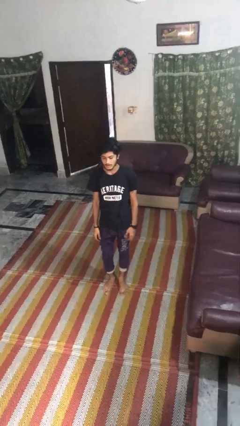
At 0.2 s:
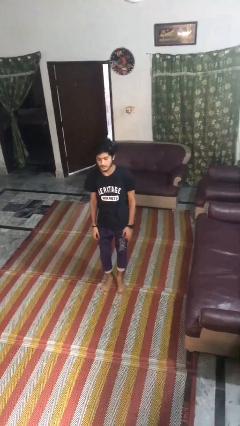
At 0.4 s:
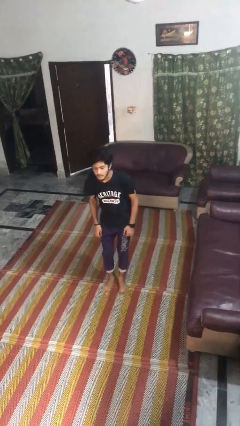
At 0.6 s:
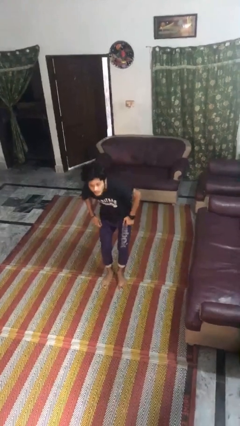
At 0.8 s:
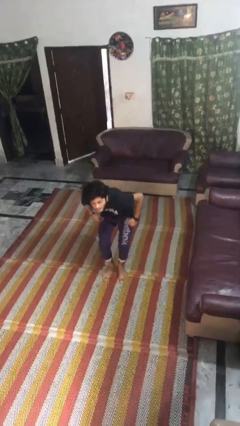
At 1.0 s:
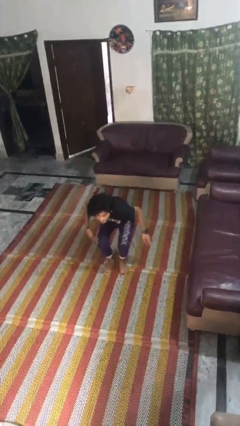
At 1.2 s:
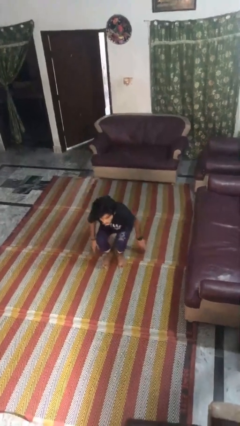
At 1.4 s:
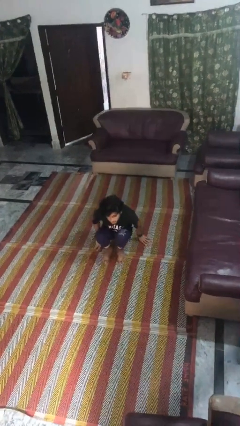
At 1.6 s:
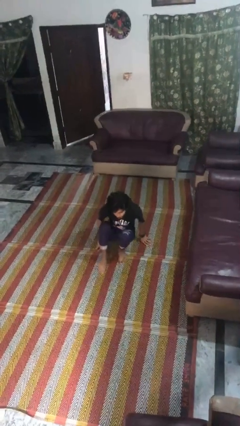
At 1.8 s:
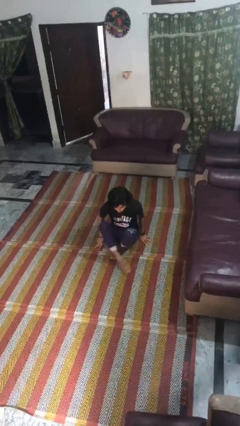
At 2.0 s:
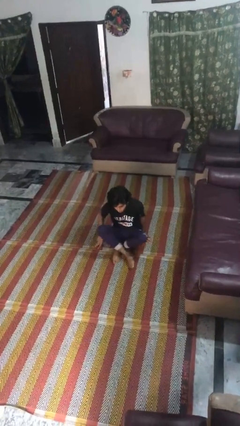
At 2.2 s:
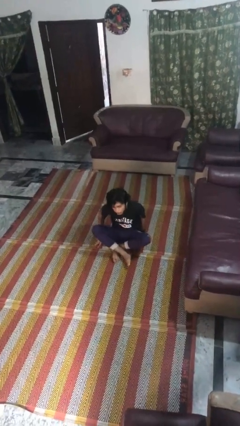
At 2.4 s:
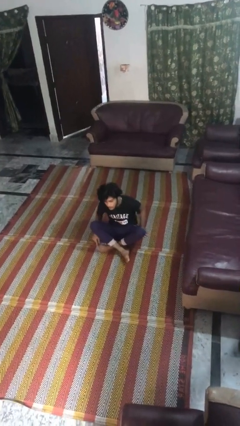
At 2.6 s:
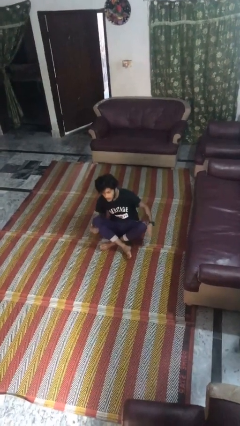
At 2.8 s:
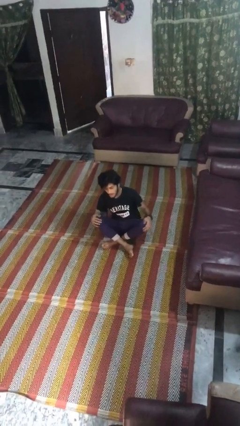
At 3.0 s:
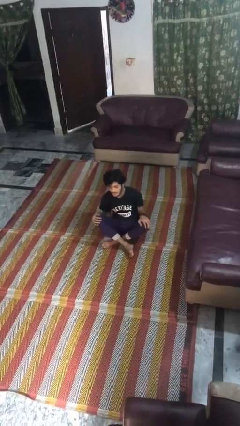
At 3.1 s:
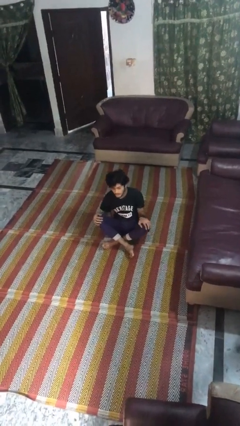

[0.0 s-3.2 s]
person sits crisscross

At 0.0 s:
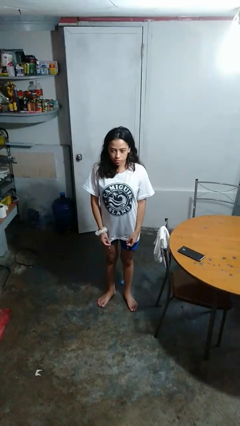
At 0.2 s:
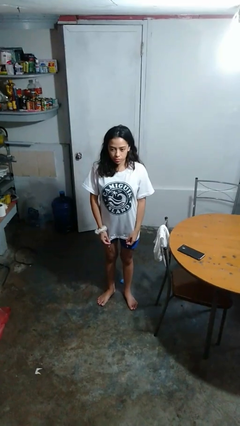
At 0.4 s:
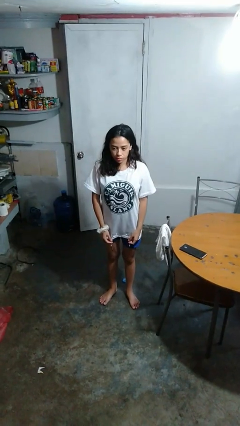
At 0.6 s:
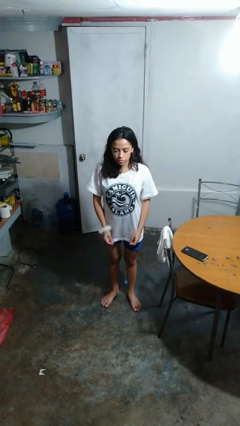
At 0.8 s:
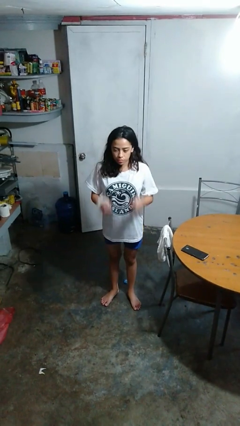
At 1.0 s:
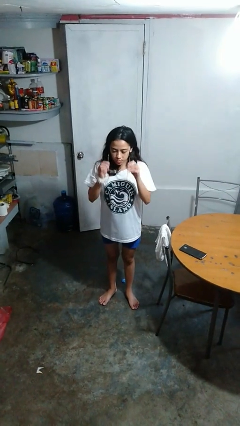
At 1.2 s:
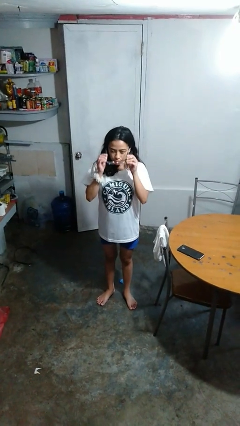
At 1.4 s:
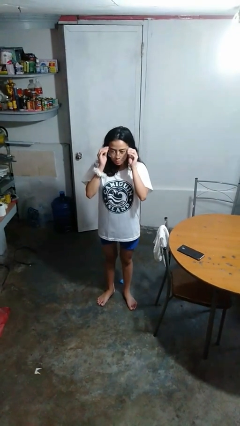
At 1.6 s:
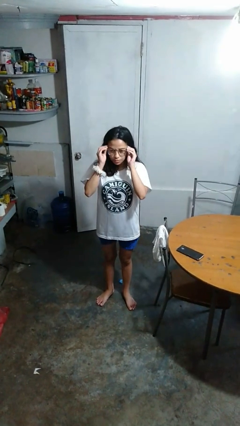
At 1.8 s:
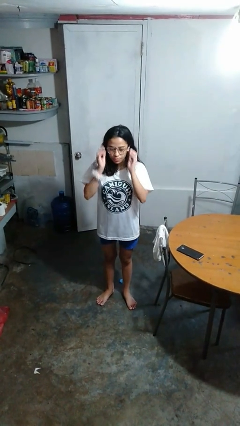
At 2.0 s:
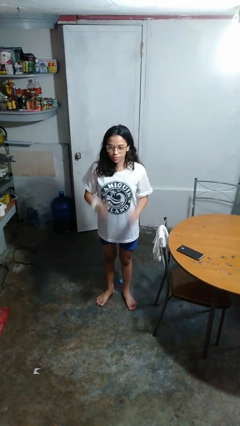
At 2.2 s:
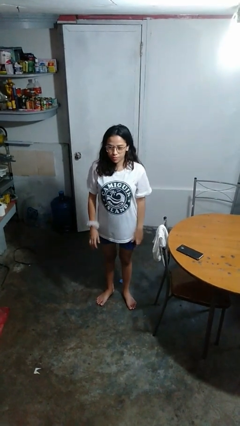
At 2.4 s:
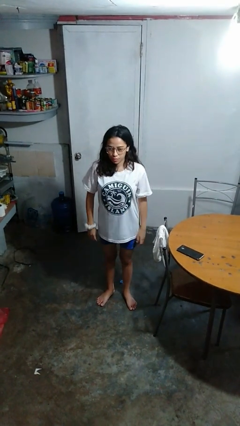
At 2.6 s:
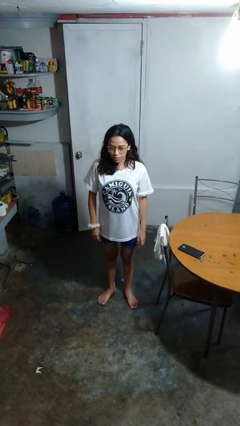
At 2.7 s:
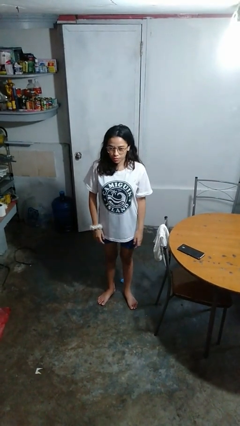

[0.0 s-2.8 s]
person puts on glasses

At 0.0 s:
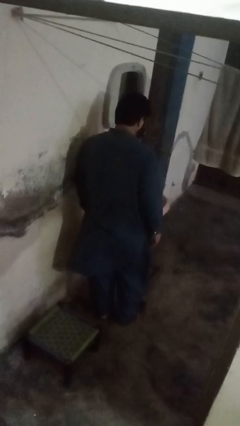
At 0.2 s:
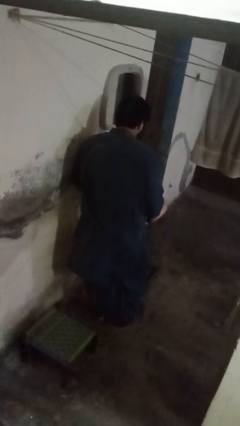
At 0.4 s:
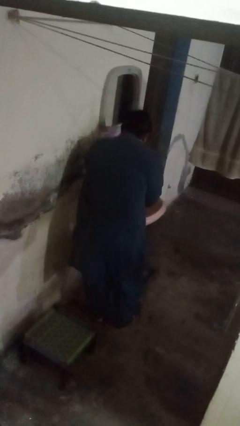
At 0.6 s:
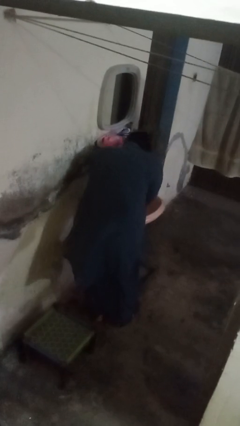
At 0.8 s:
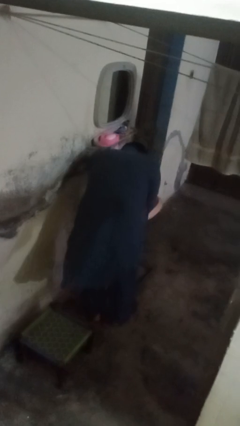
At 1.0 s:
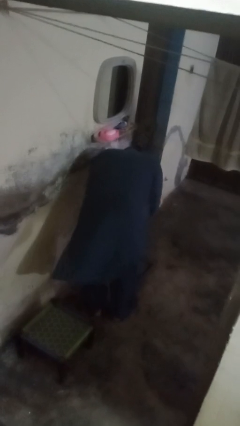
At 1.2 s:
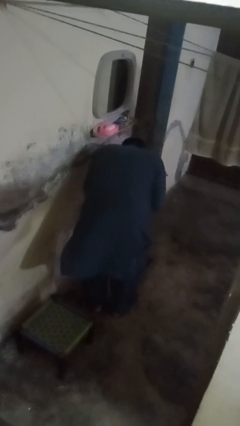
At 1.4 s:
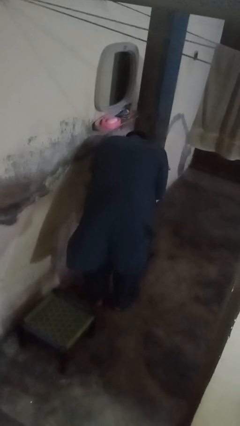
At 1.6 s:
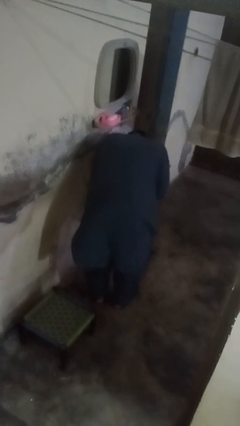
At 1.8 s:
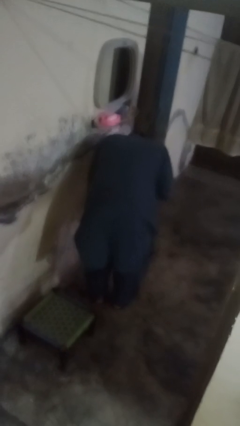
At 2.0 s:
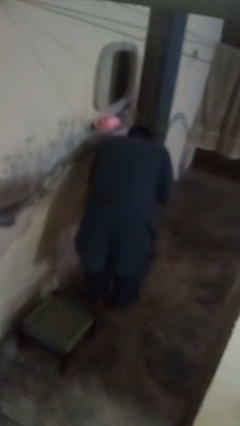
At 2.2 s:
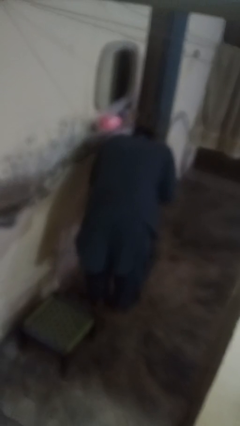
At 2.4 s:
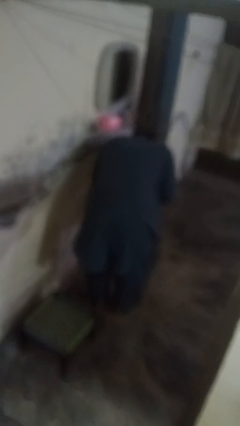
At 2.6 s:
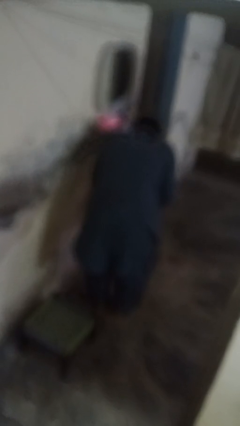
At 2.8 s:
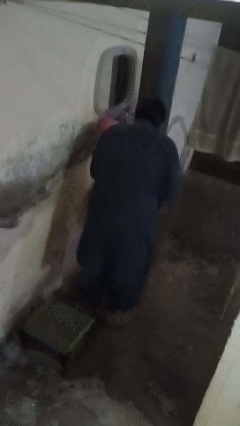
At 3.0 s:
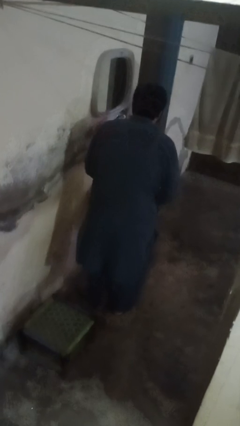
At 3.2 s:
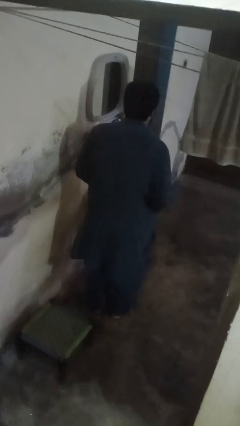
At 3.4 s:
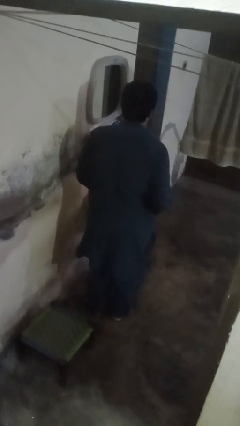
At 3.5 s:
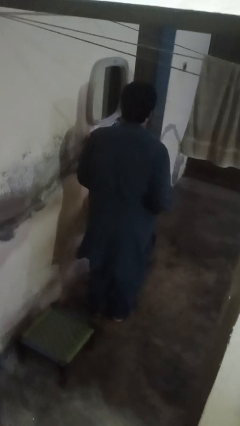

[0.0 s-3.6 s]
person washes face

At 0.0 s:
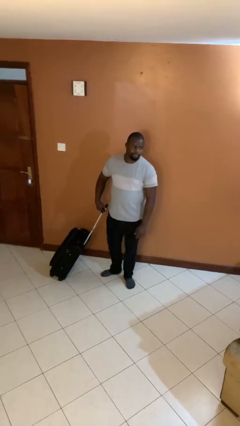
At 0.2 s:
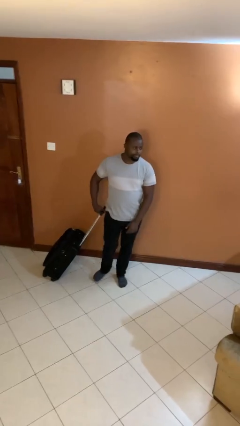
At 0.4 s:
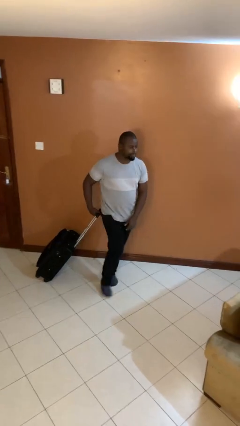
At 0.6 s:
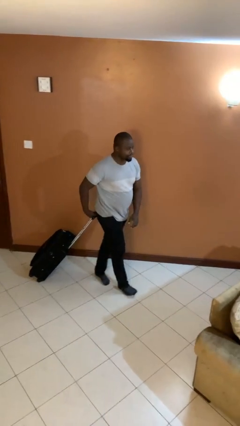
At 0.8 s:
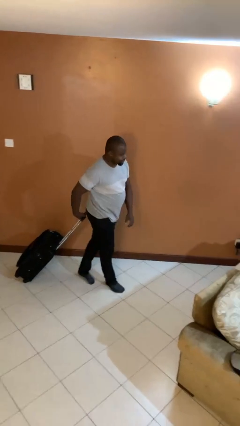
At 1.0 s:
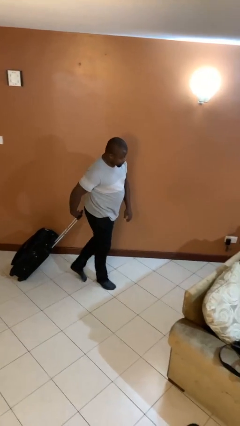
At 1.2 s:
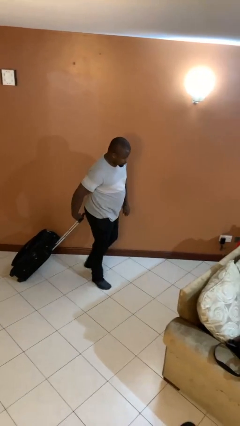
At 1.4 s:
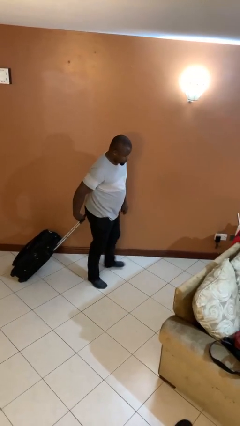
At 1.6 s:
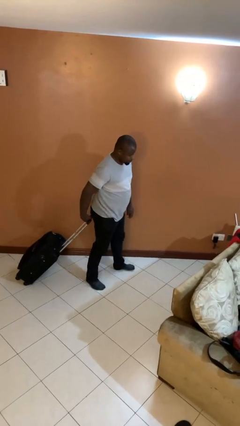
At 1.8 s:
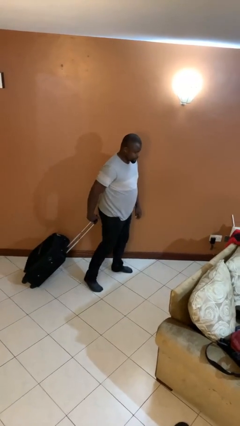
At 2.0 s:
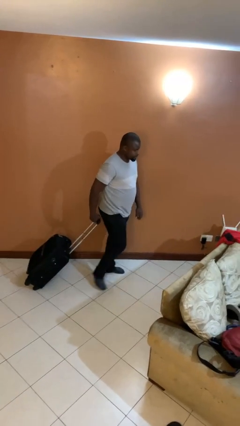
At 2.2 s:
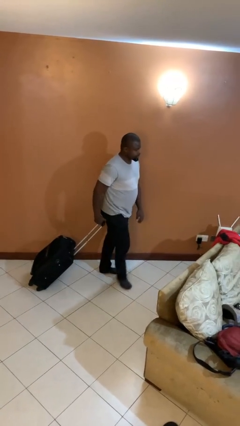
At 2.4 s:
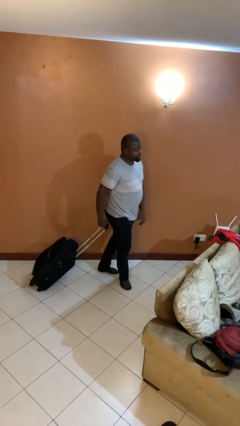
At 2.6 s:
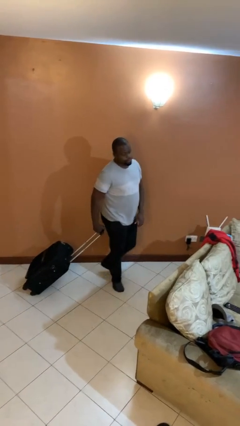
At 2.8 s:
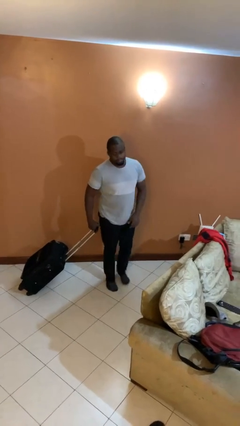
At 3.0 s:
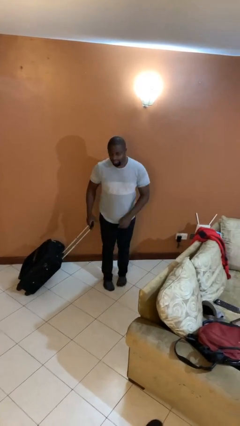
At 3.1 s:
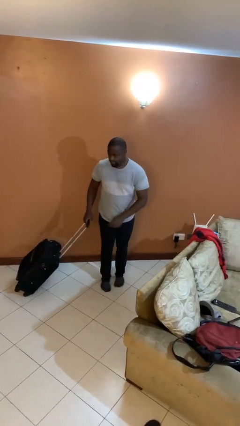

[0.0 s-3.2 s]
person pulls wheeled cart

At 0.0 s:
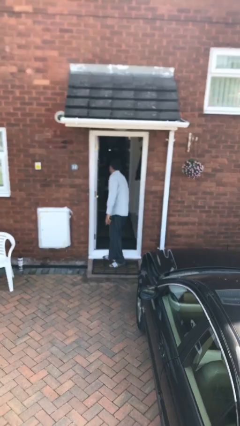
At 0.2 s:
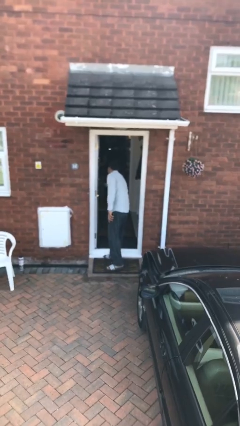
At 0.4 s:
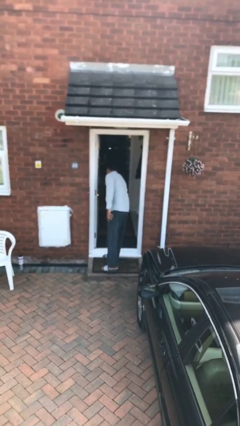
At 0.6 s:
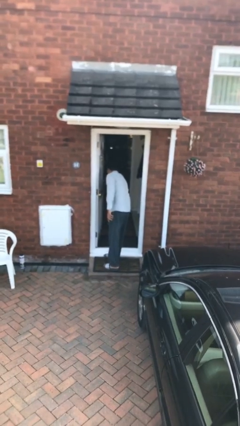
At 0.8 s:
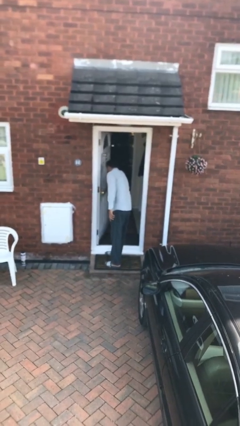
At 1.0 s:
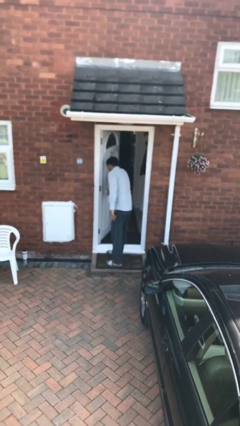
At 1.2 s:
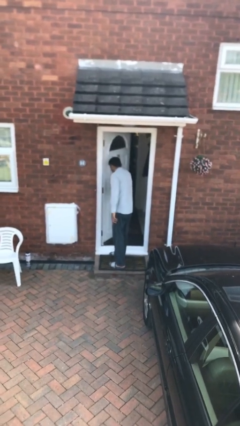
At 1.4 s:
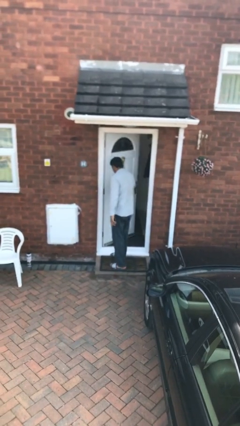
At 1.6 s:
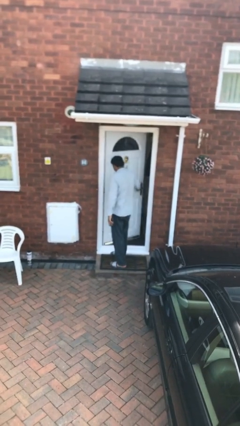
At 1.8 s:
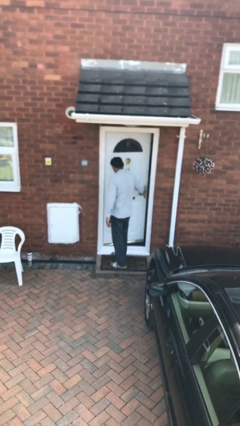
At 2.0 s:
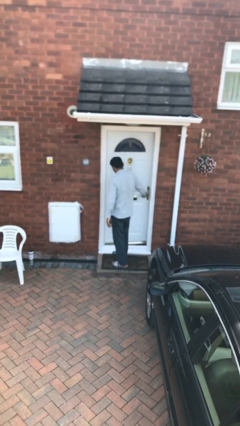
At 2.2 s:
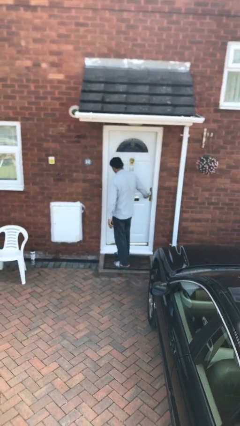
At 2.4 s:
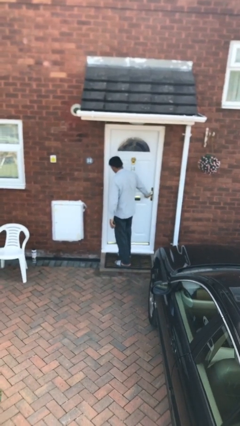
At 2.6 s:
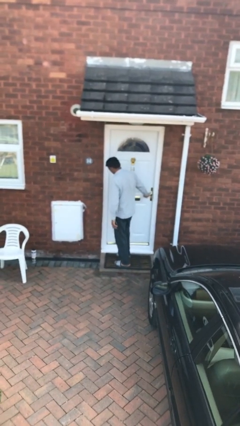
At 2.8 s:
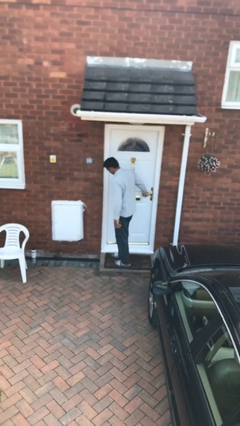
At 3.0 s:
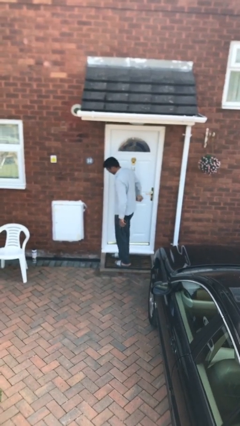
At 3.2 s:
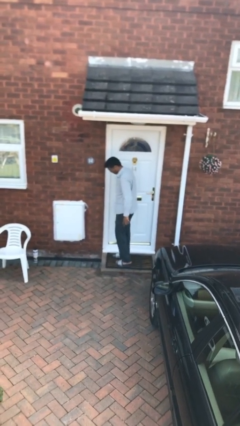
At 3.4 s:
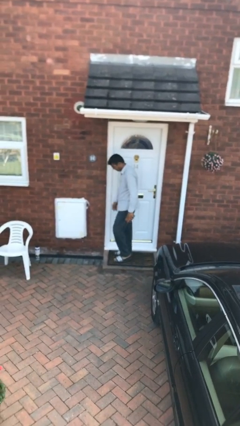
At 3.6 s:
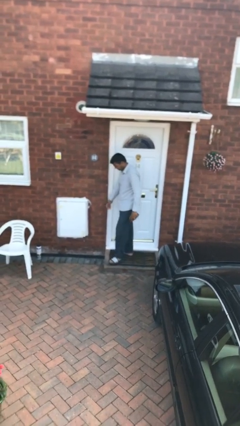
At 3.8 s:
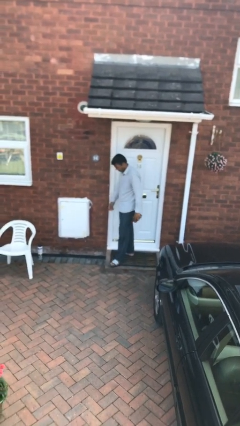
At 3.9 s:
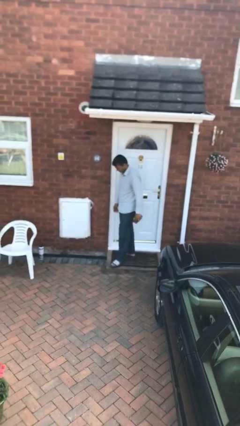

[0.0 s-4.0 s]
person closes facility door

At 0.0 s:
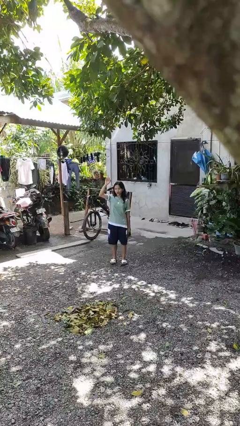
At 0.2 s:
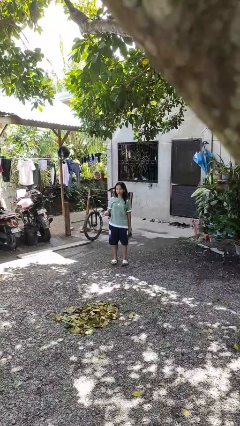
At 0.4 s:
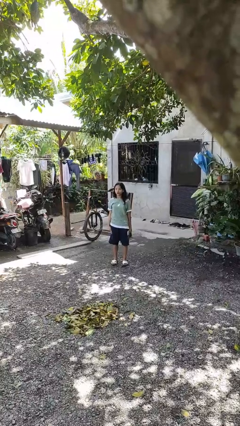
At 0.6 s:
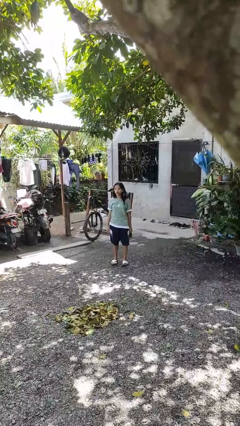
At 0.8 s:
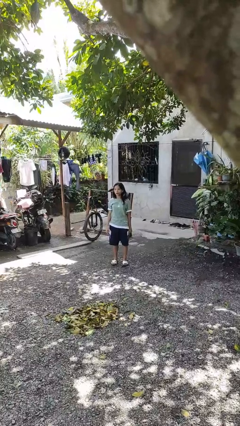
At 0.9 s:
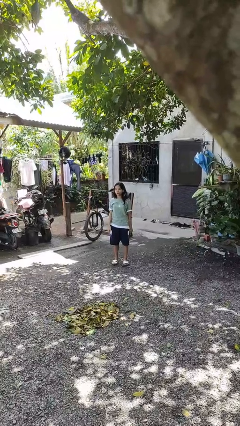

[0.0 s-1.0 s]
person gestures lower hand
